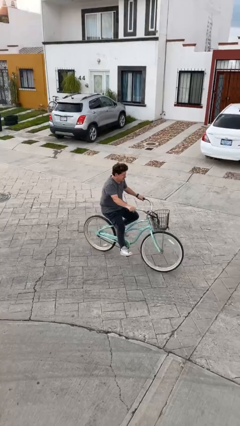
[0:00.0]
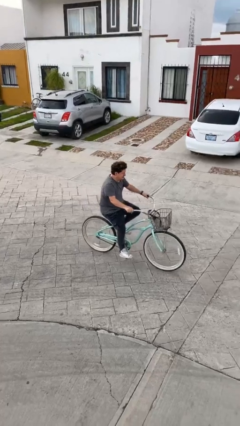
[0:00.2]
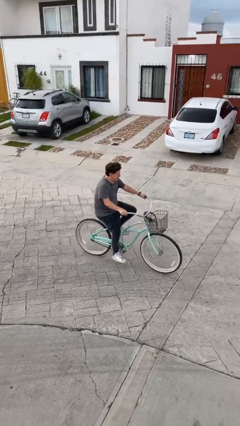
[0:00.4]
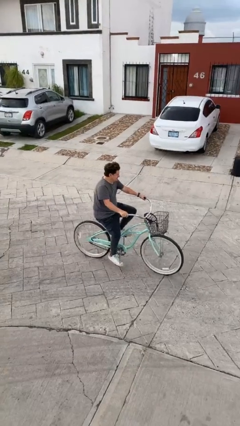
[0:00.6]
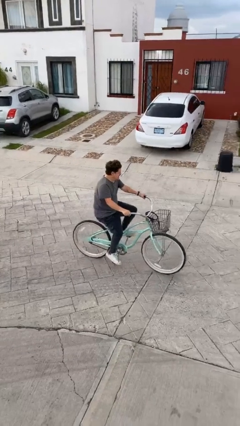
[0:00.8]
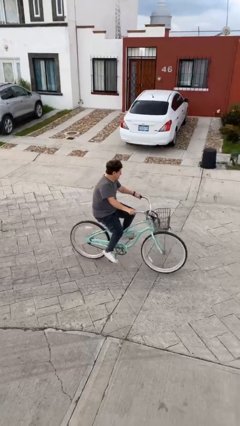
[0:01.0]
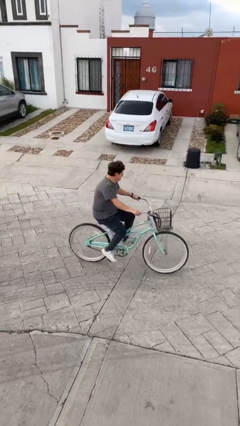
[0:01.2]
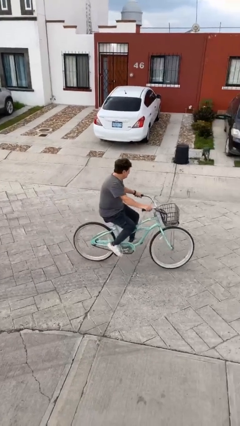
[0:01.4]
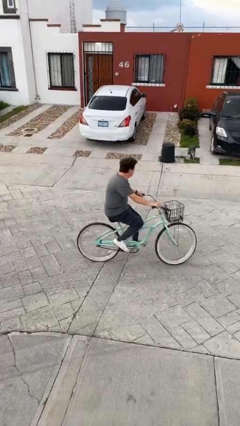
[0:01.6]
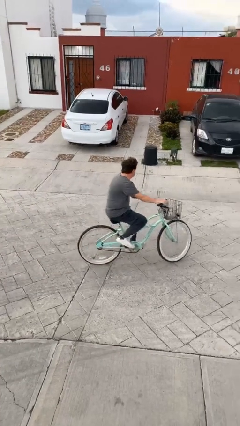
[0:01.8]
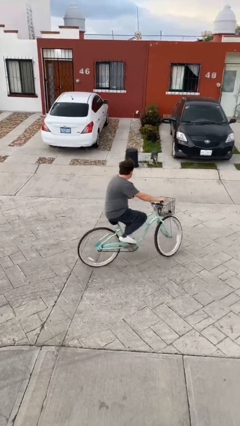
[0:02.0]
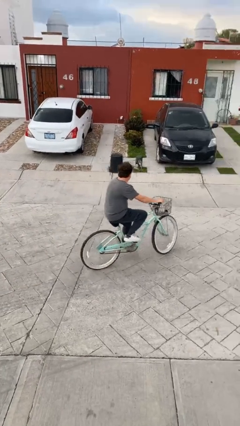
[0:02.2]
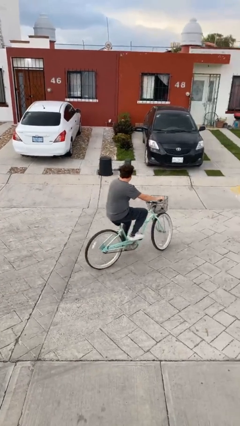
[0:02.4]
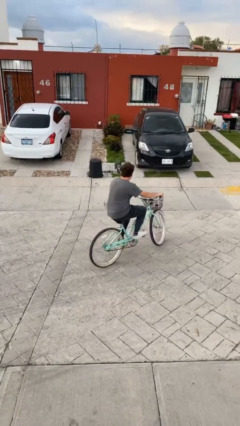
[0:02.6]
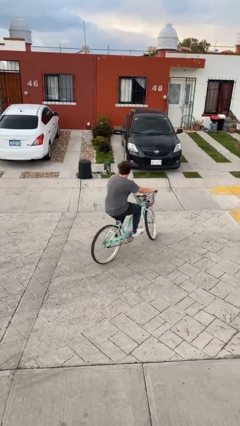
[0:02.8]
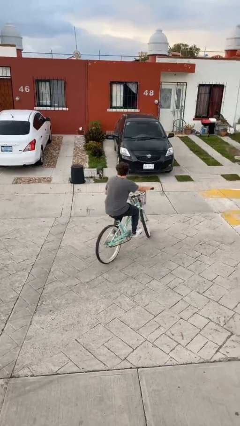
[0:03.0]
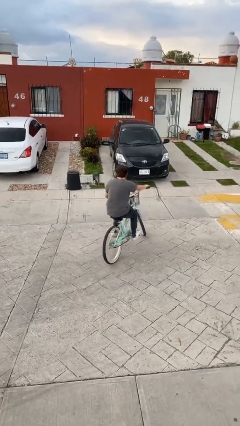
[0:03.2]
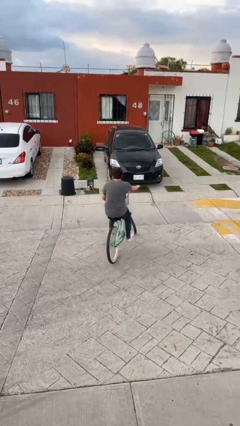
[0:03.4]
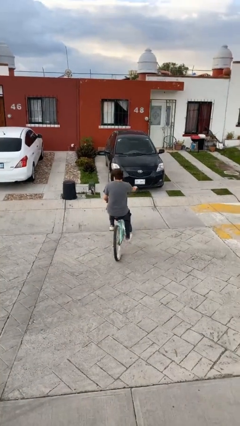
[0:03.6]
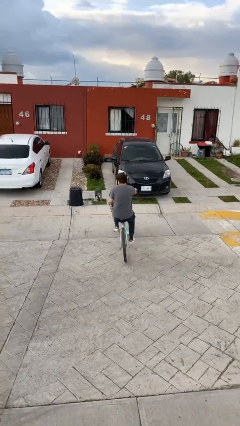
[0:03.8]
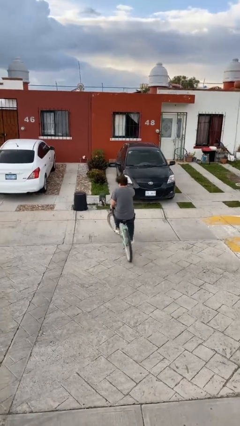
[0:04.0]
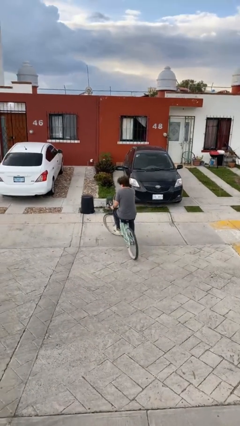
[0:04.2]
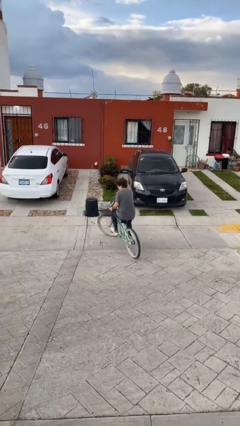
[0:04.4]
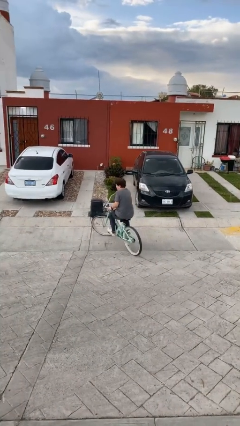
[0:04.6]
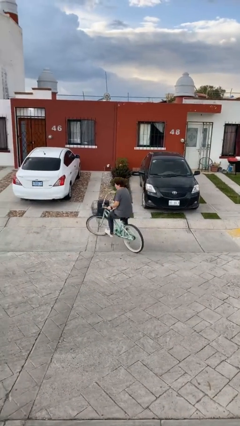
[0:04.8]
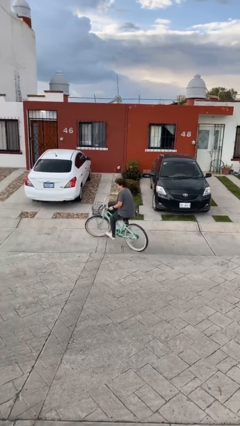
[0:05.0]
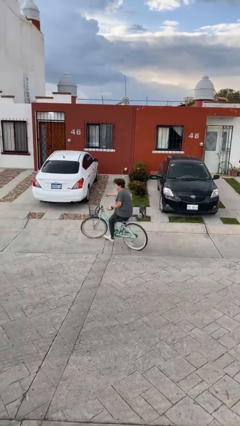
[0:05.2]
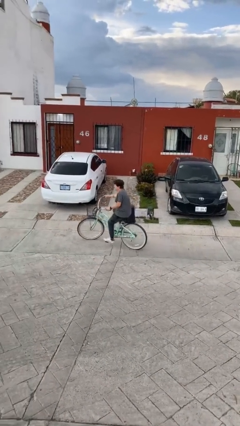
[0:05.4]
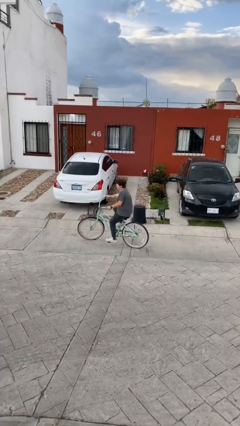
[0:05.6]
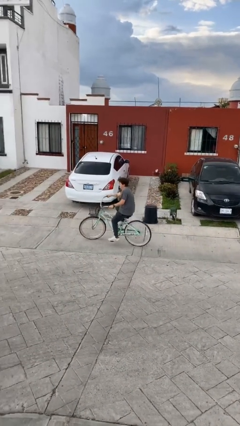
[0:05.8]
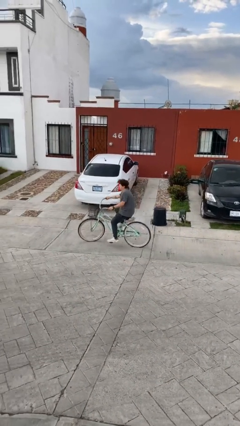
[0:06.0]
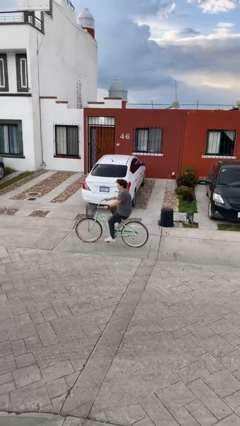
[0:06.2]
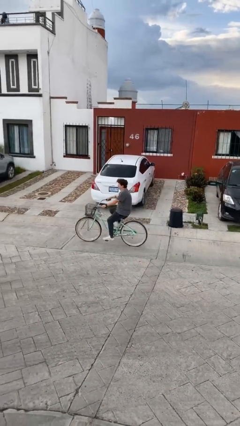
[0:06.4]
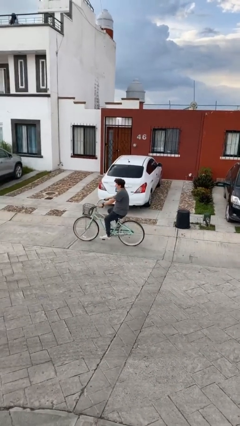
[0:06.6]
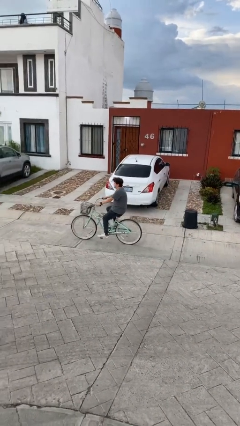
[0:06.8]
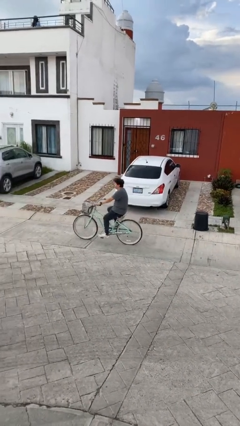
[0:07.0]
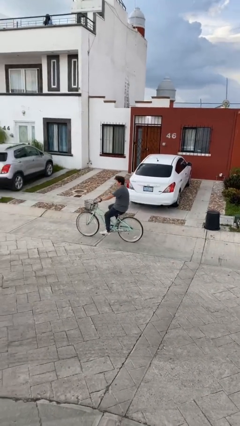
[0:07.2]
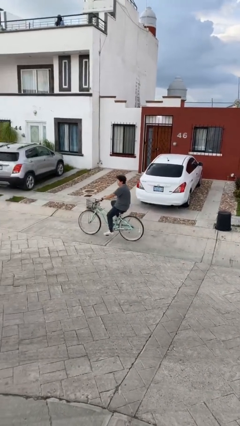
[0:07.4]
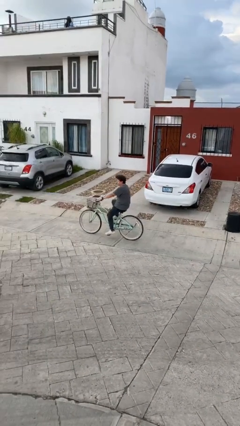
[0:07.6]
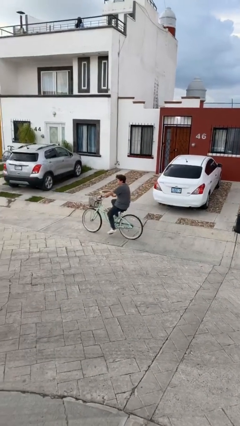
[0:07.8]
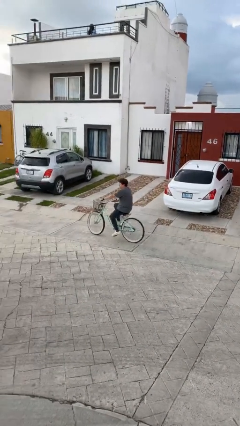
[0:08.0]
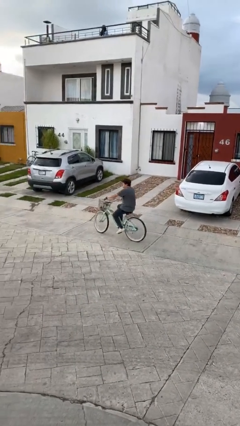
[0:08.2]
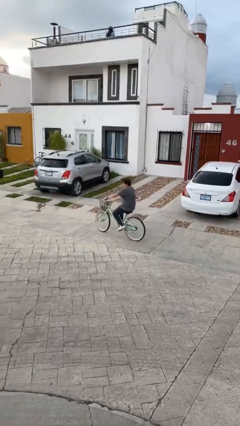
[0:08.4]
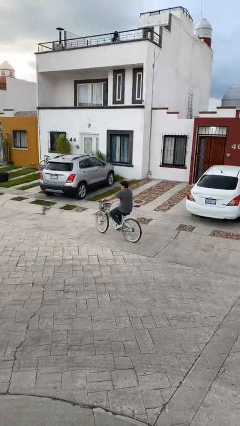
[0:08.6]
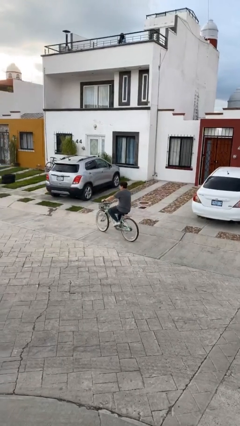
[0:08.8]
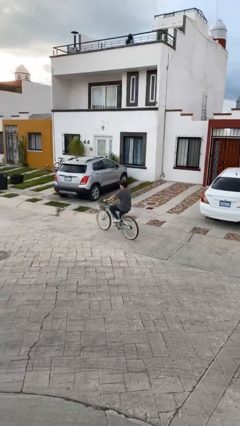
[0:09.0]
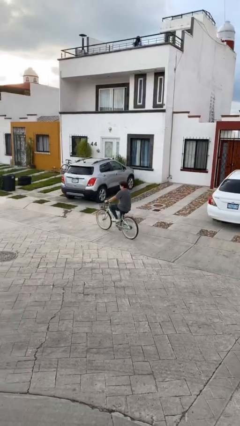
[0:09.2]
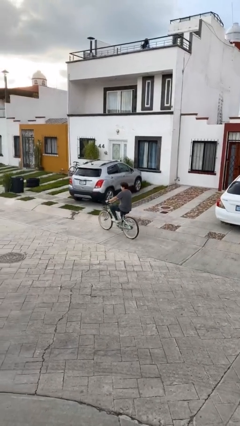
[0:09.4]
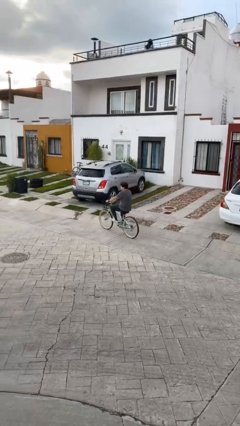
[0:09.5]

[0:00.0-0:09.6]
person rides bicycle

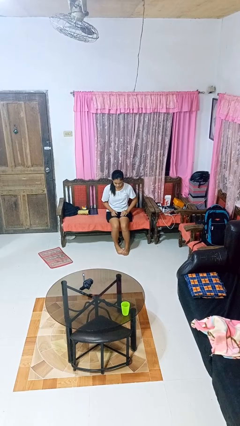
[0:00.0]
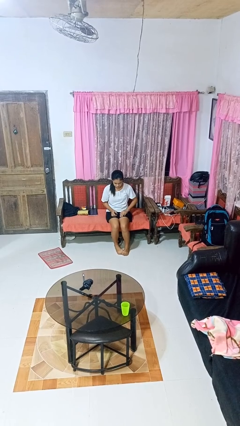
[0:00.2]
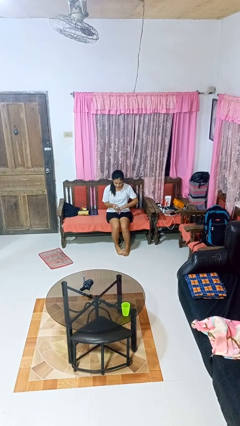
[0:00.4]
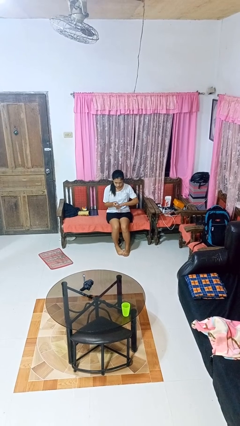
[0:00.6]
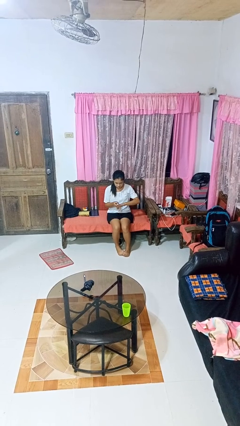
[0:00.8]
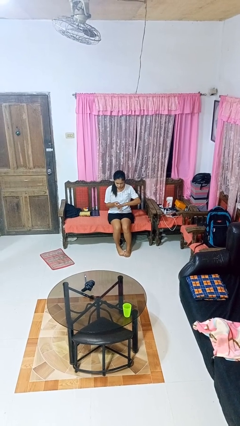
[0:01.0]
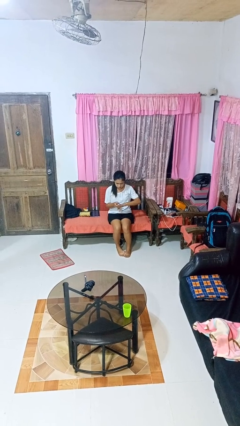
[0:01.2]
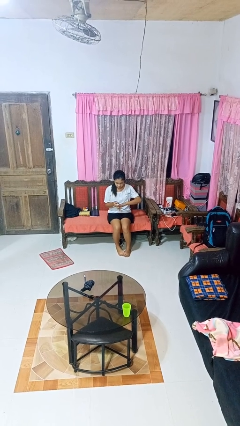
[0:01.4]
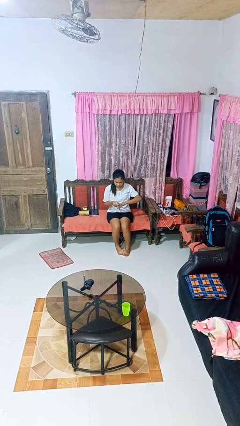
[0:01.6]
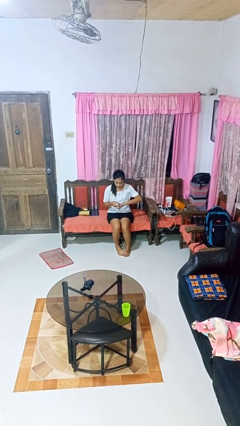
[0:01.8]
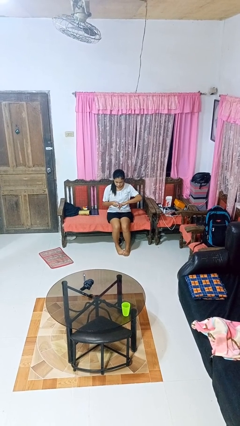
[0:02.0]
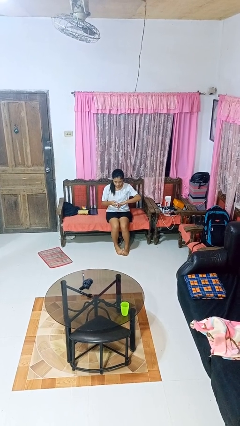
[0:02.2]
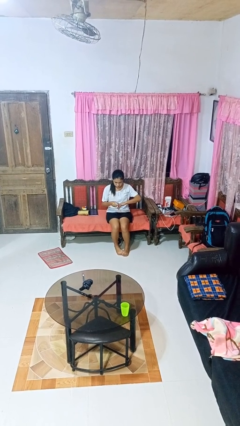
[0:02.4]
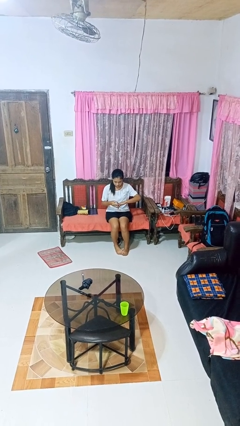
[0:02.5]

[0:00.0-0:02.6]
person clips fingernails

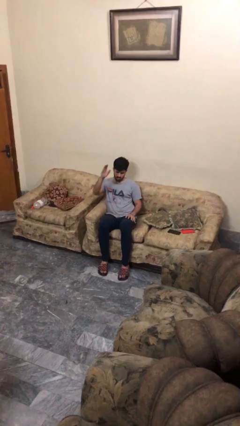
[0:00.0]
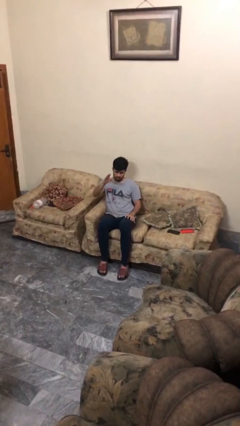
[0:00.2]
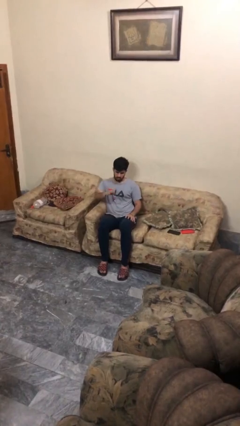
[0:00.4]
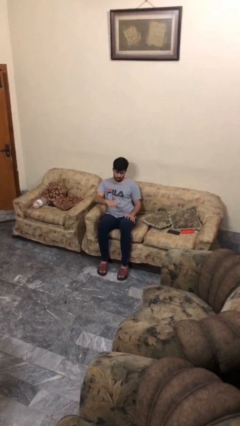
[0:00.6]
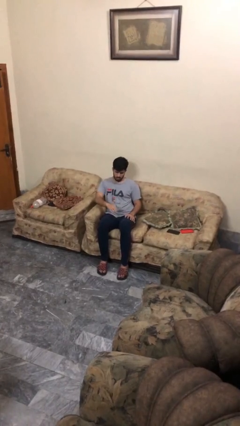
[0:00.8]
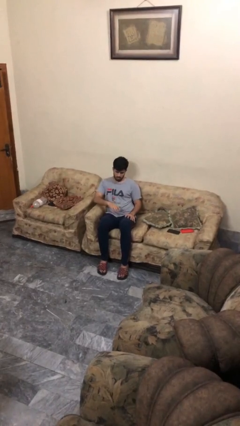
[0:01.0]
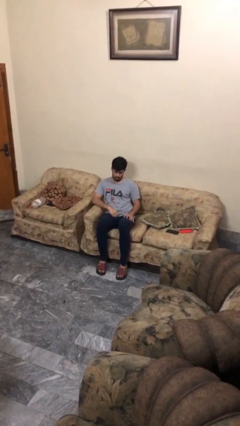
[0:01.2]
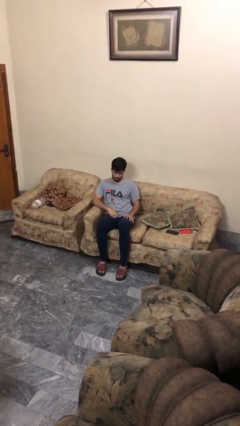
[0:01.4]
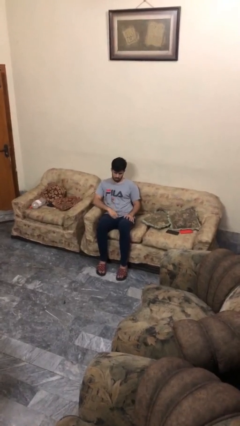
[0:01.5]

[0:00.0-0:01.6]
person gestures swipe down

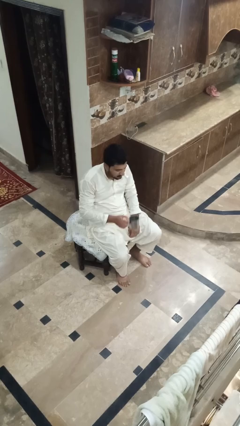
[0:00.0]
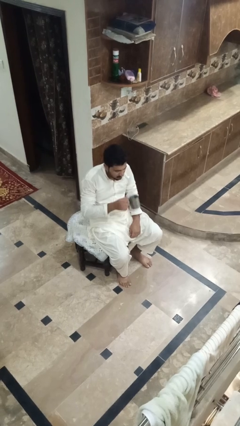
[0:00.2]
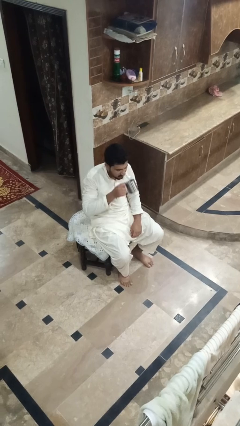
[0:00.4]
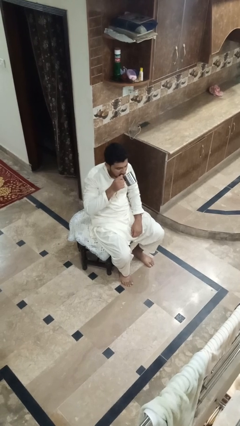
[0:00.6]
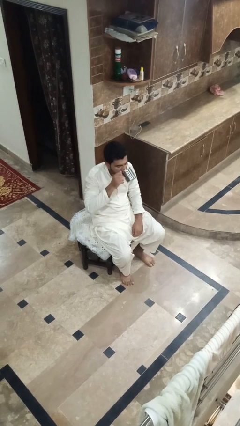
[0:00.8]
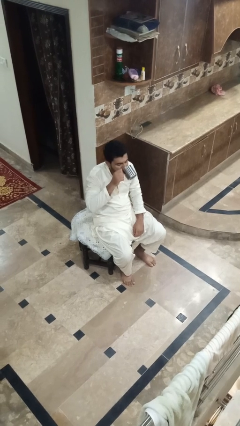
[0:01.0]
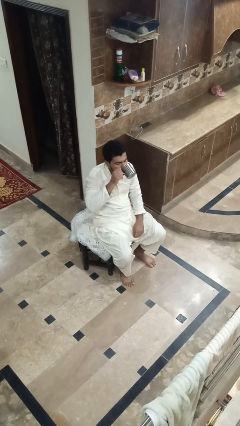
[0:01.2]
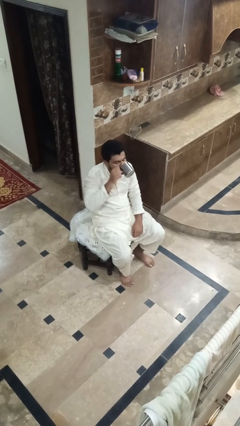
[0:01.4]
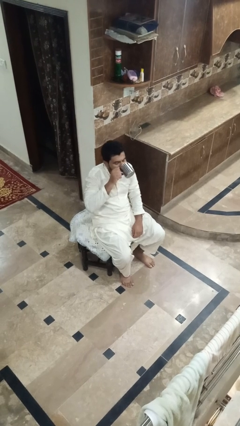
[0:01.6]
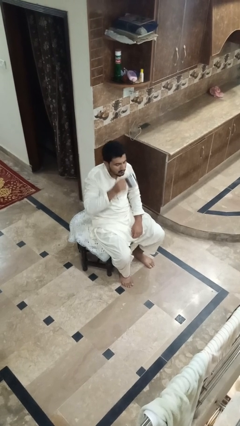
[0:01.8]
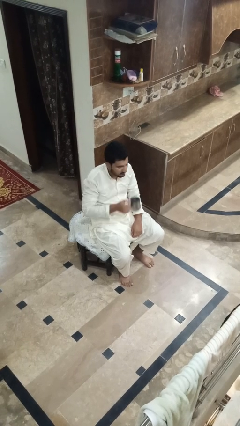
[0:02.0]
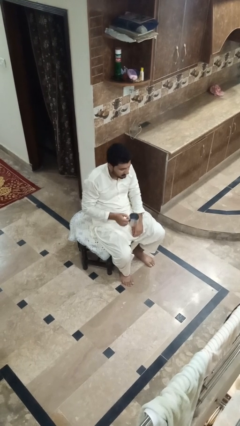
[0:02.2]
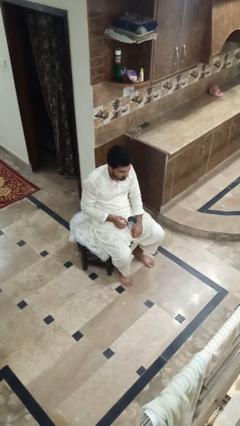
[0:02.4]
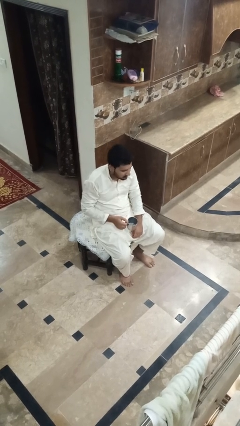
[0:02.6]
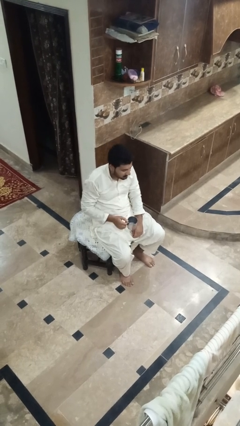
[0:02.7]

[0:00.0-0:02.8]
person drinks from mug

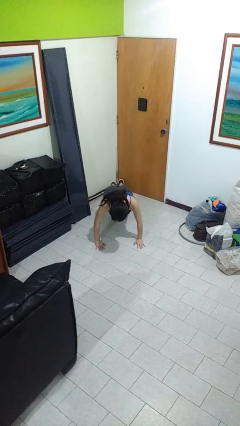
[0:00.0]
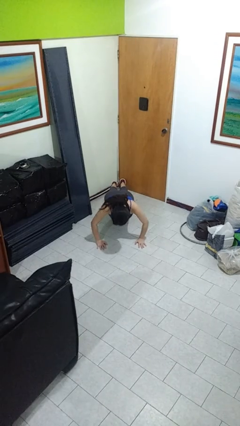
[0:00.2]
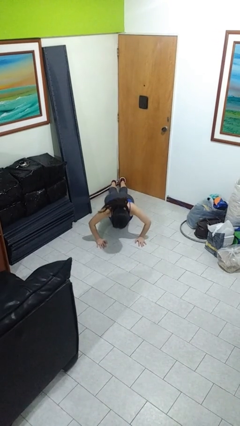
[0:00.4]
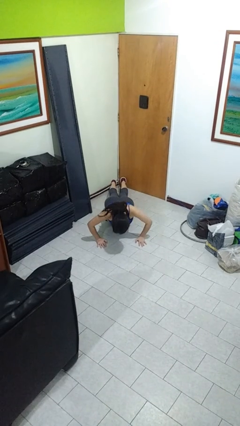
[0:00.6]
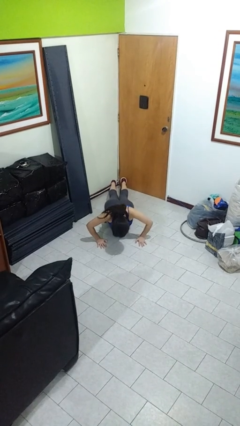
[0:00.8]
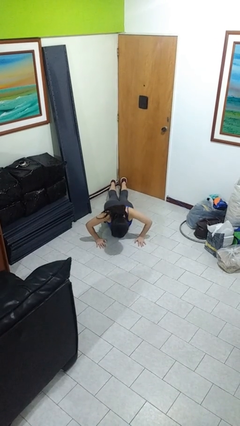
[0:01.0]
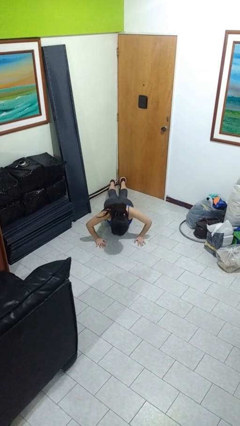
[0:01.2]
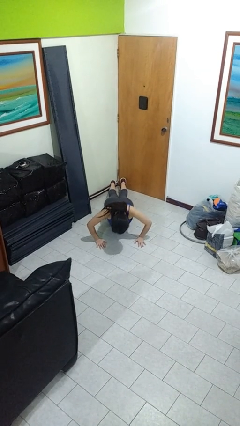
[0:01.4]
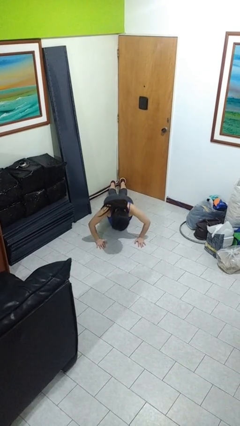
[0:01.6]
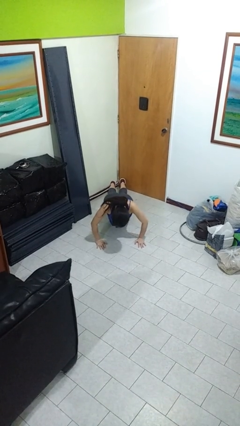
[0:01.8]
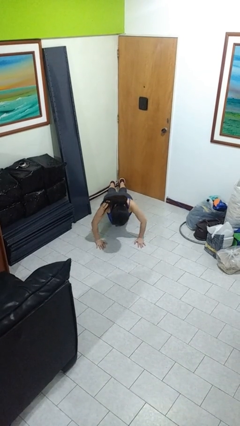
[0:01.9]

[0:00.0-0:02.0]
person exercises with pushup
